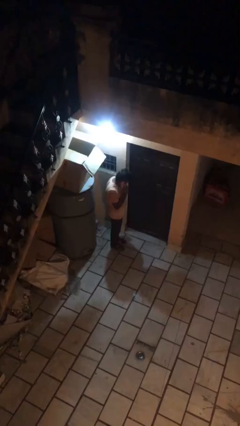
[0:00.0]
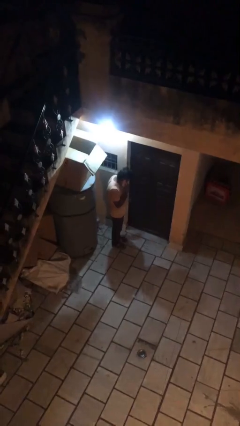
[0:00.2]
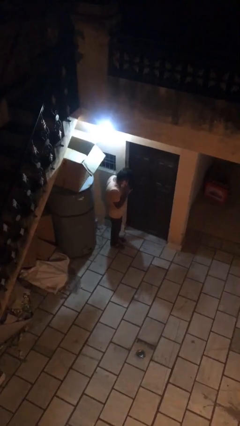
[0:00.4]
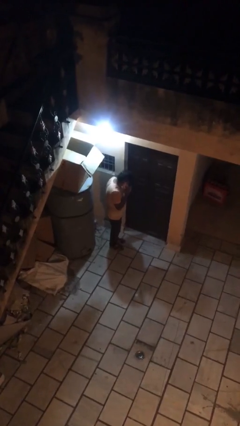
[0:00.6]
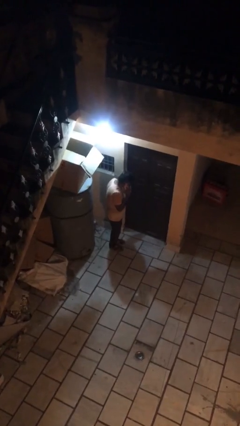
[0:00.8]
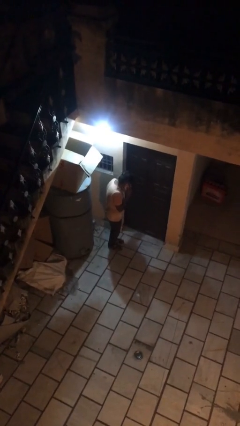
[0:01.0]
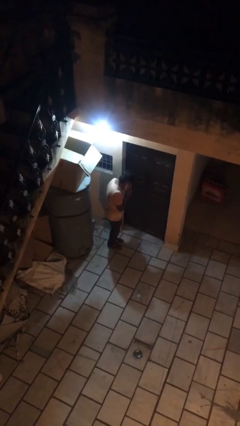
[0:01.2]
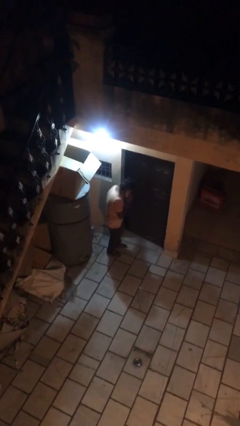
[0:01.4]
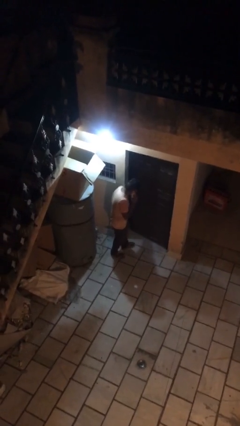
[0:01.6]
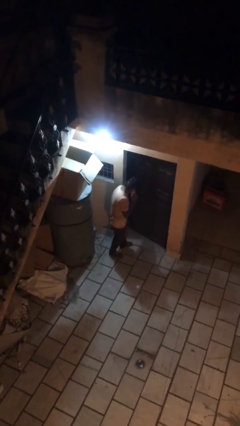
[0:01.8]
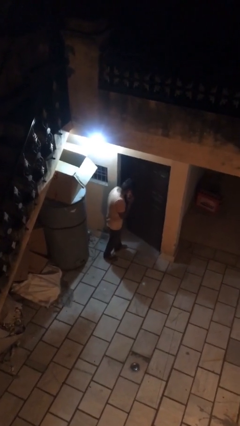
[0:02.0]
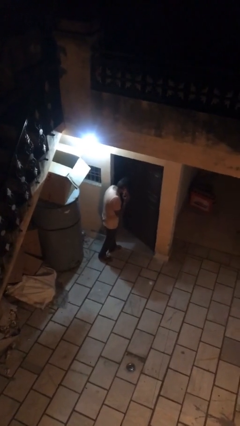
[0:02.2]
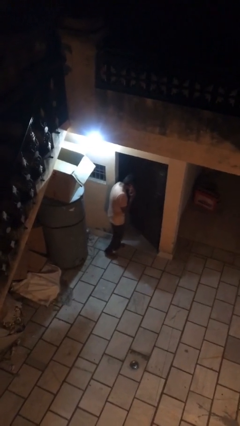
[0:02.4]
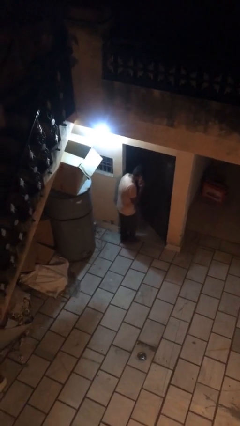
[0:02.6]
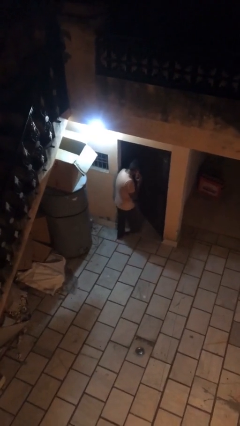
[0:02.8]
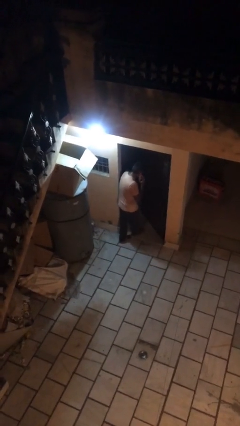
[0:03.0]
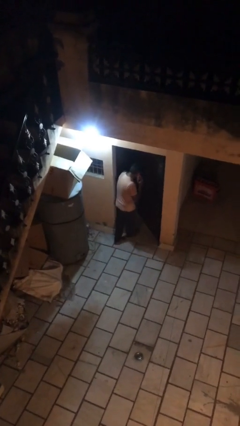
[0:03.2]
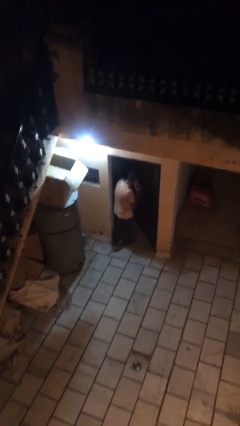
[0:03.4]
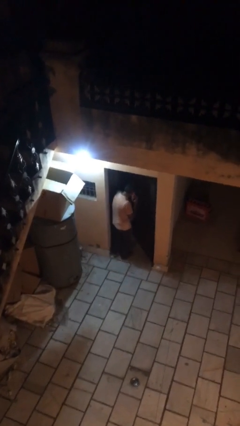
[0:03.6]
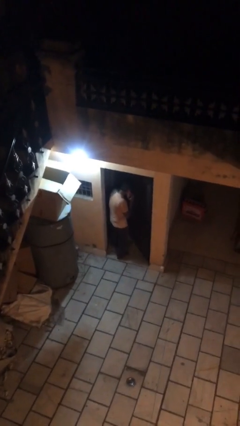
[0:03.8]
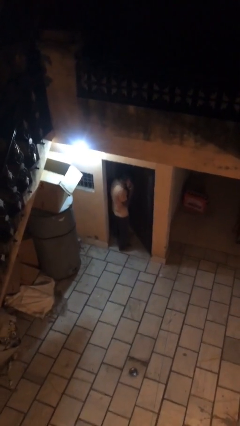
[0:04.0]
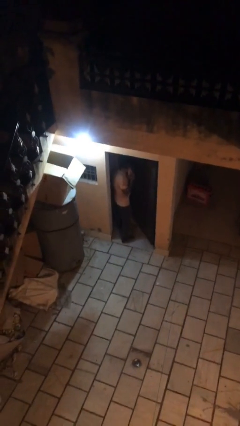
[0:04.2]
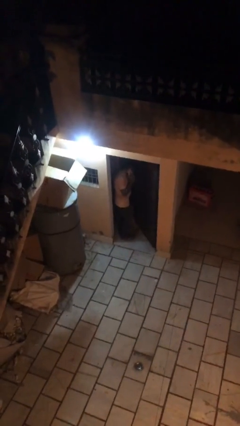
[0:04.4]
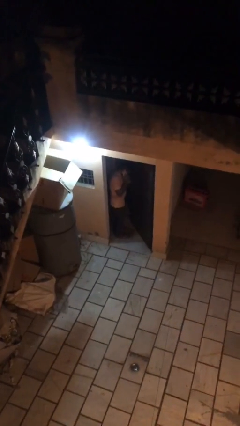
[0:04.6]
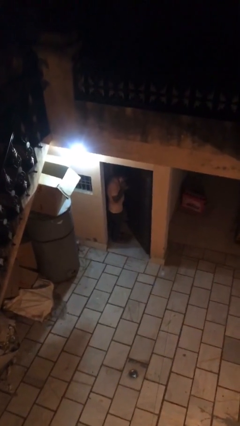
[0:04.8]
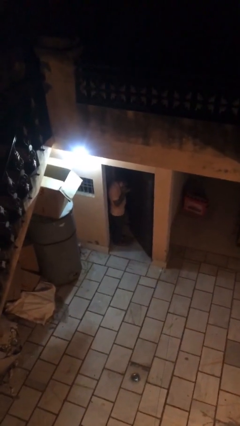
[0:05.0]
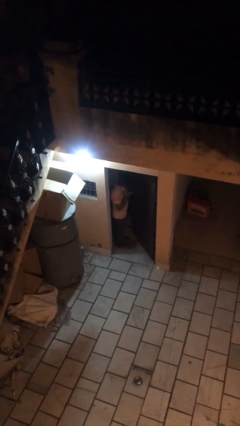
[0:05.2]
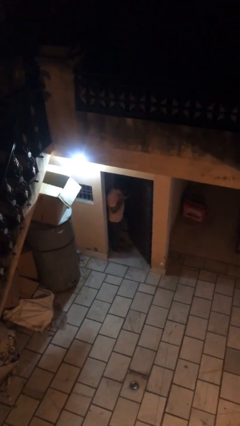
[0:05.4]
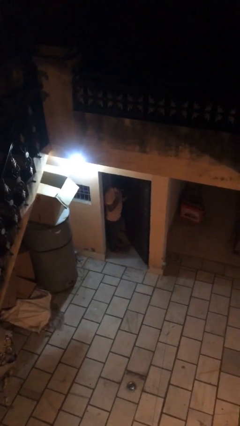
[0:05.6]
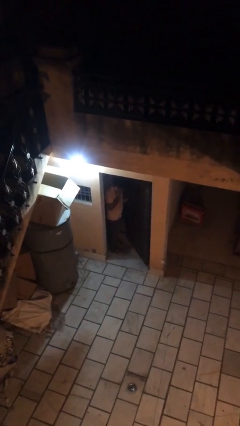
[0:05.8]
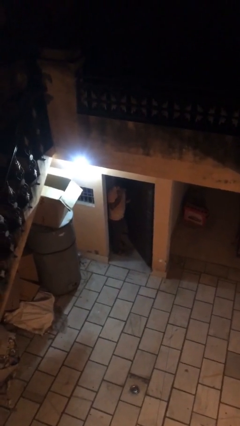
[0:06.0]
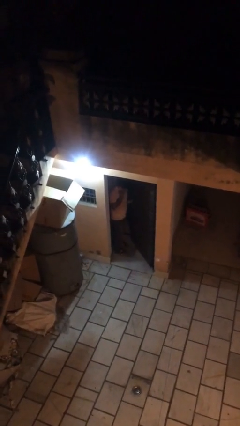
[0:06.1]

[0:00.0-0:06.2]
person opens facility door

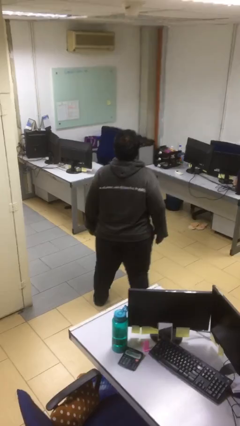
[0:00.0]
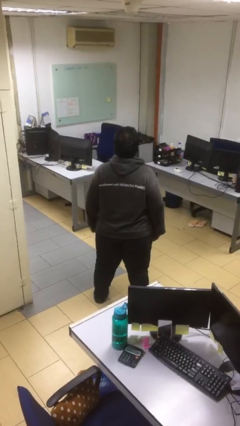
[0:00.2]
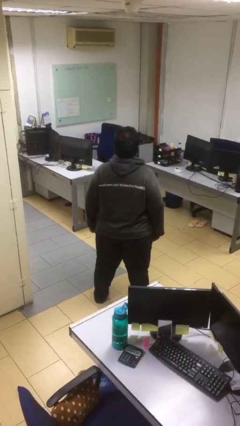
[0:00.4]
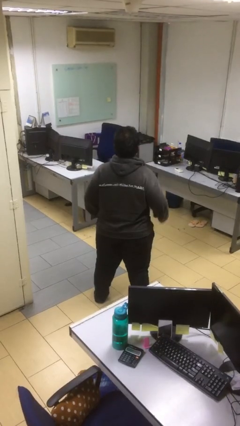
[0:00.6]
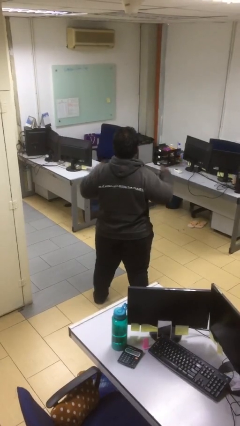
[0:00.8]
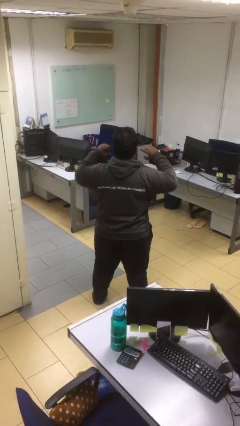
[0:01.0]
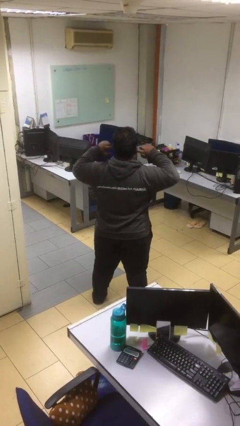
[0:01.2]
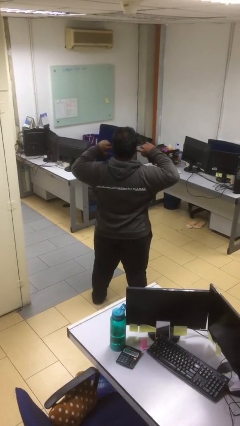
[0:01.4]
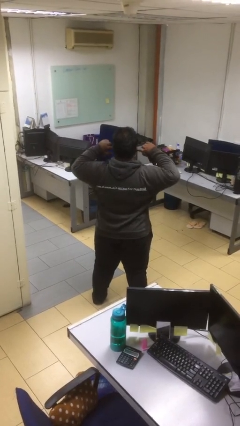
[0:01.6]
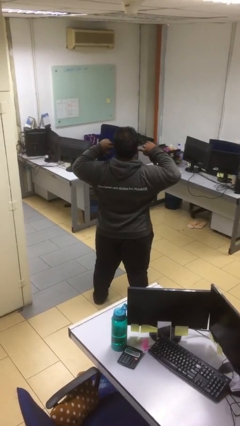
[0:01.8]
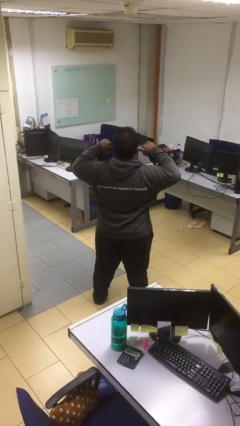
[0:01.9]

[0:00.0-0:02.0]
person puts fingers in ear

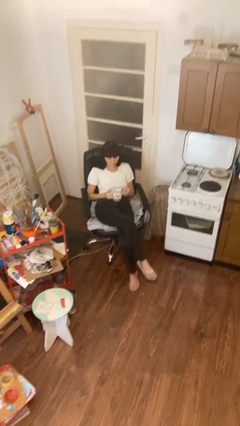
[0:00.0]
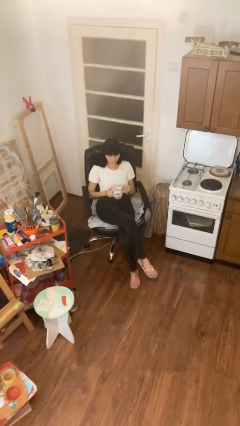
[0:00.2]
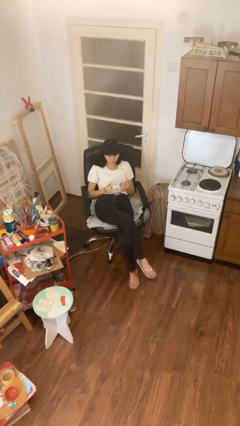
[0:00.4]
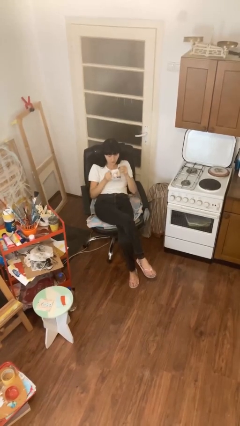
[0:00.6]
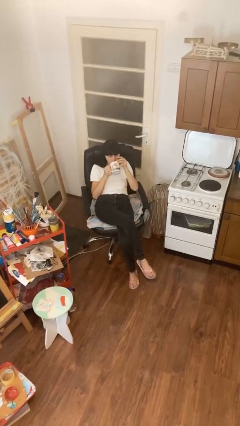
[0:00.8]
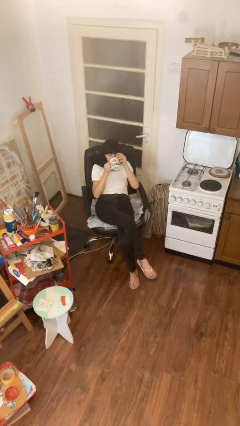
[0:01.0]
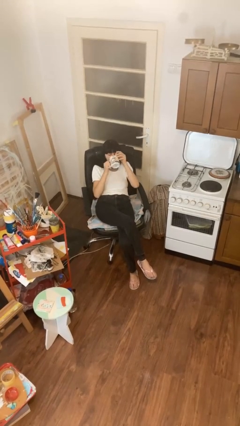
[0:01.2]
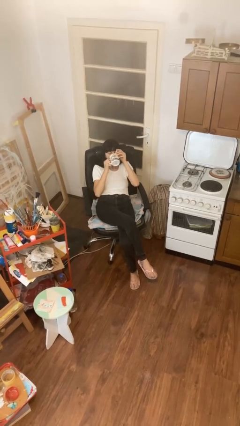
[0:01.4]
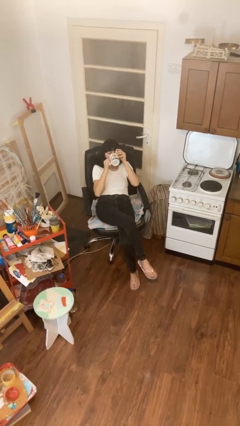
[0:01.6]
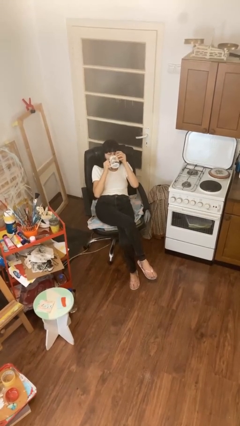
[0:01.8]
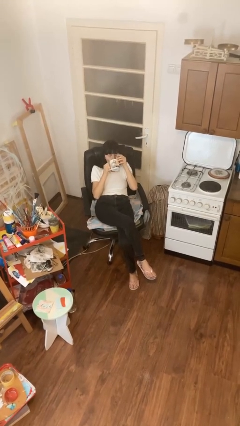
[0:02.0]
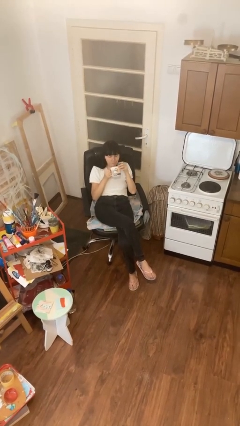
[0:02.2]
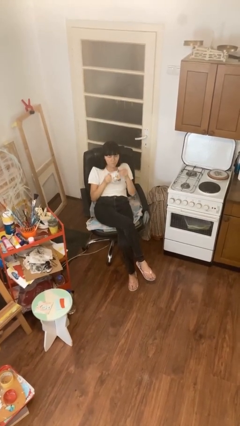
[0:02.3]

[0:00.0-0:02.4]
person drinks from mug

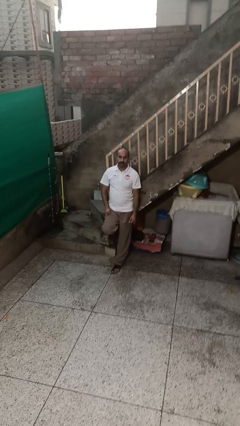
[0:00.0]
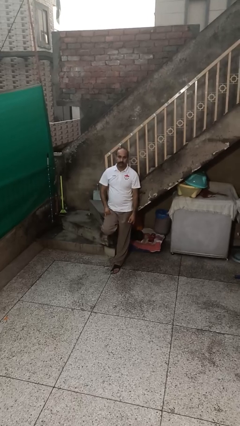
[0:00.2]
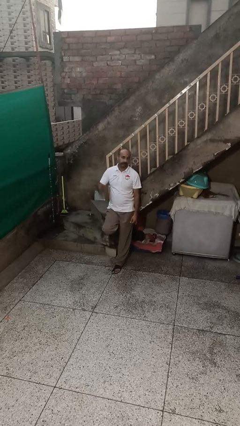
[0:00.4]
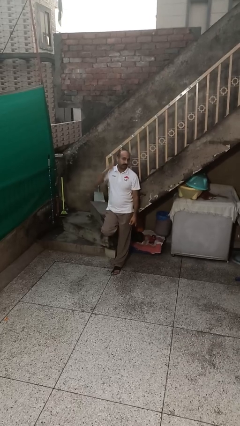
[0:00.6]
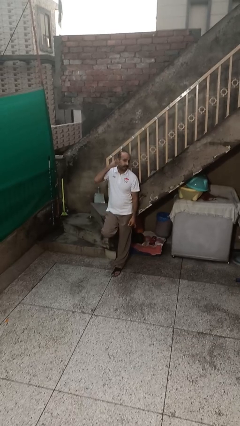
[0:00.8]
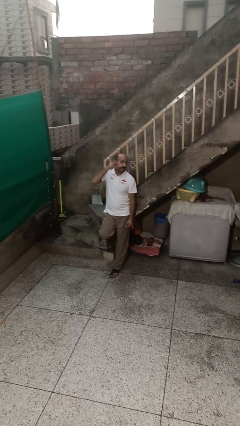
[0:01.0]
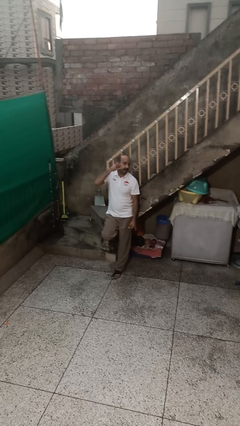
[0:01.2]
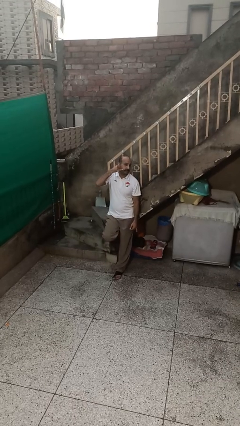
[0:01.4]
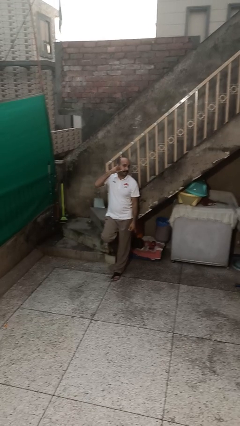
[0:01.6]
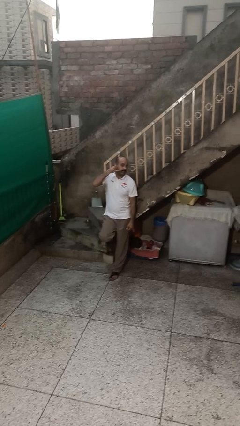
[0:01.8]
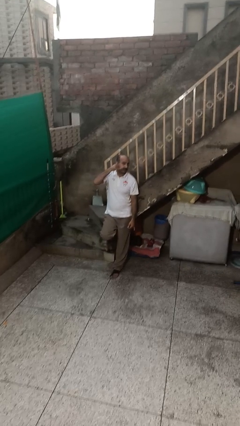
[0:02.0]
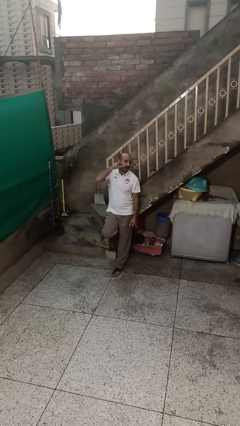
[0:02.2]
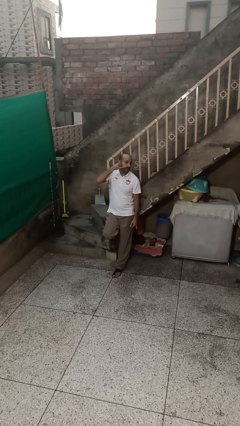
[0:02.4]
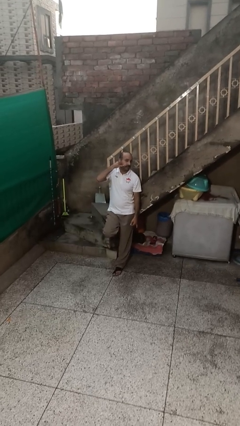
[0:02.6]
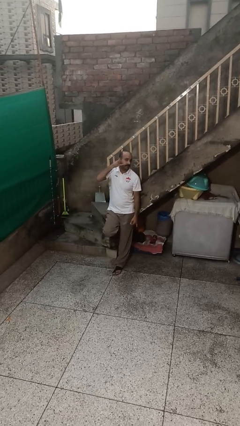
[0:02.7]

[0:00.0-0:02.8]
person gestures call me

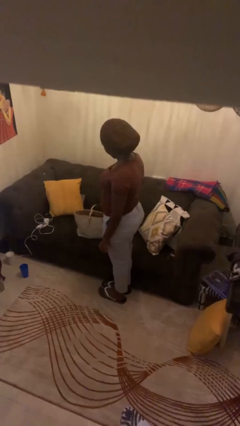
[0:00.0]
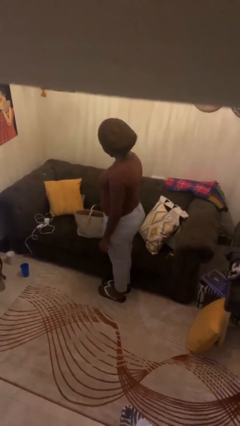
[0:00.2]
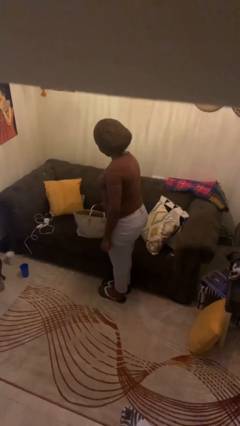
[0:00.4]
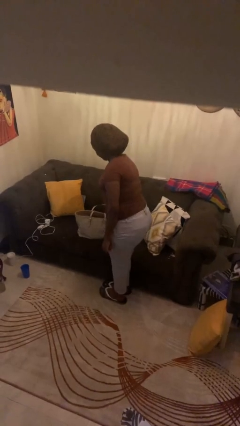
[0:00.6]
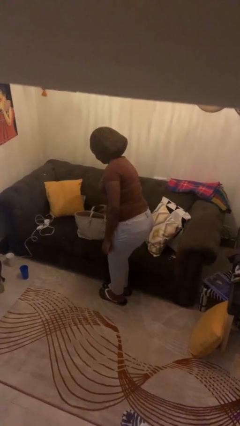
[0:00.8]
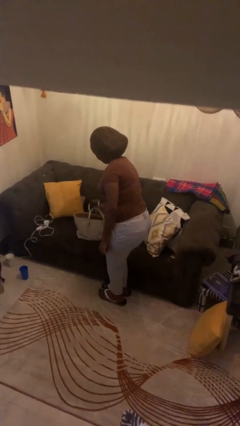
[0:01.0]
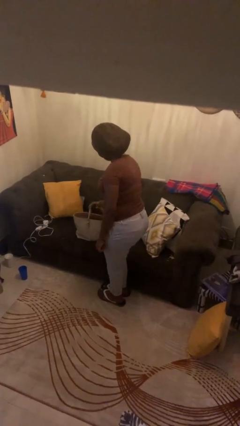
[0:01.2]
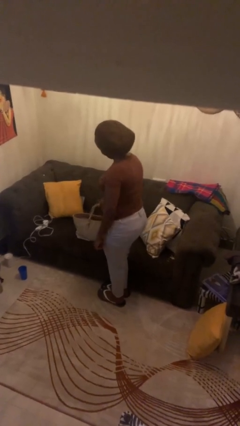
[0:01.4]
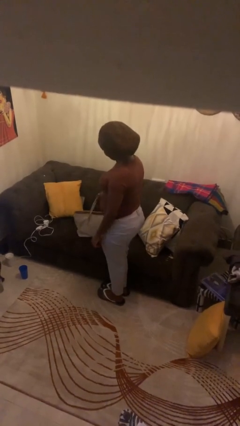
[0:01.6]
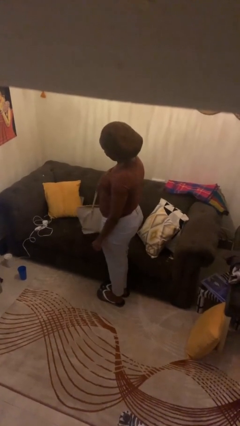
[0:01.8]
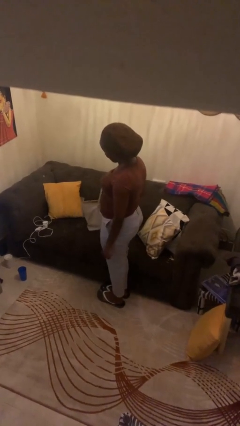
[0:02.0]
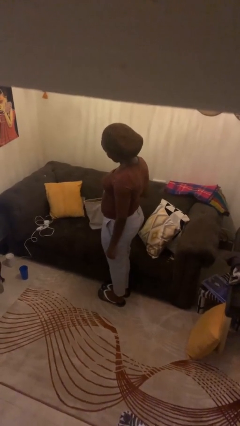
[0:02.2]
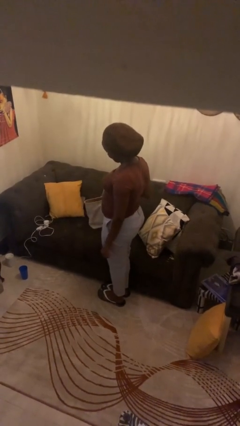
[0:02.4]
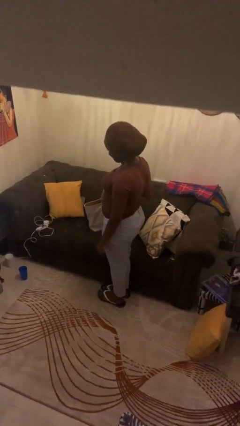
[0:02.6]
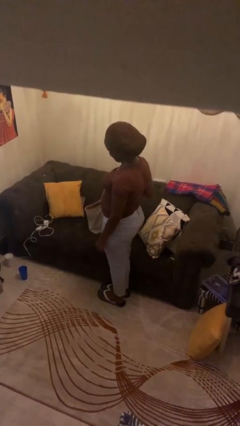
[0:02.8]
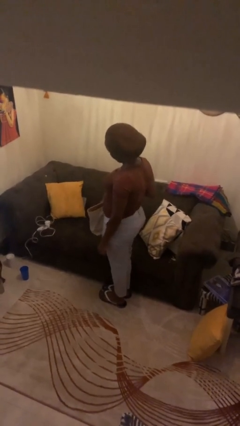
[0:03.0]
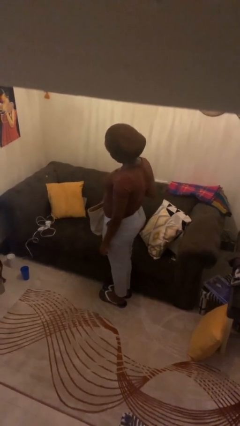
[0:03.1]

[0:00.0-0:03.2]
person picks up object from couch

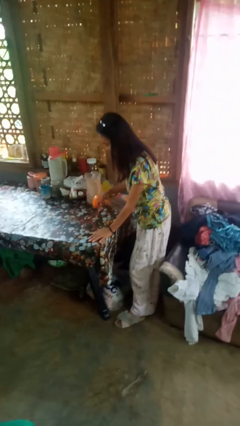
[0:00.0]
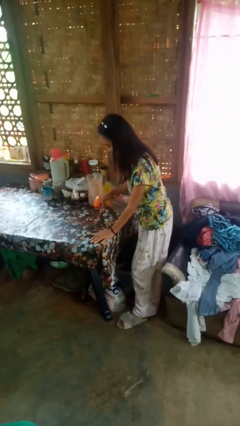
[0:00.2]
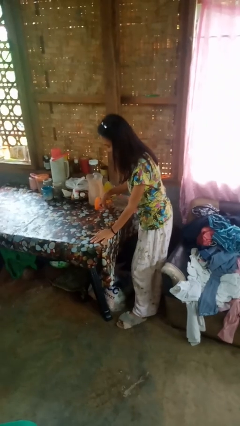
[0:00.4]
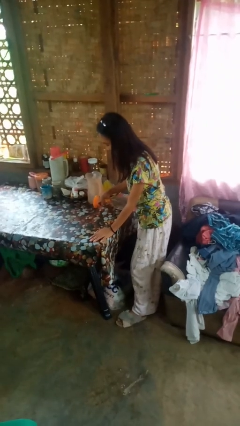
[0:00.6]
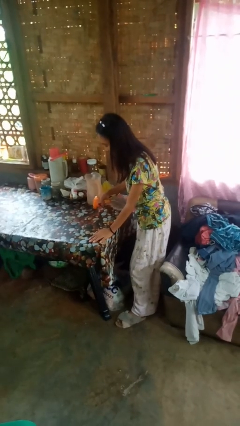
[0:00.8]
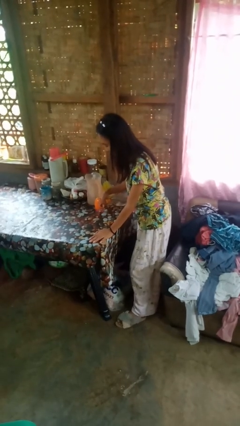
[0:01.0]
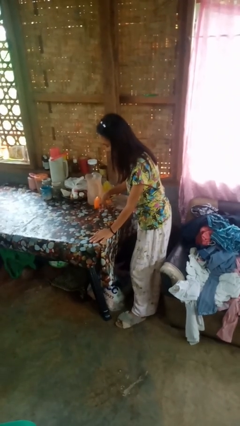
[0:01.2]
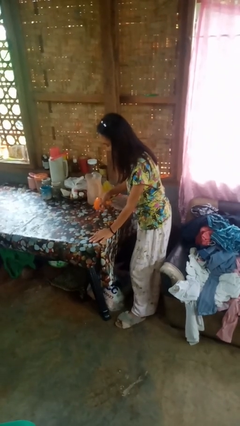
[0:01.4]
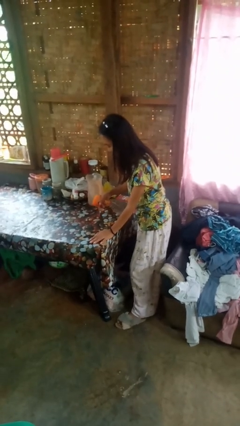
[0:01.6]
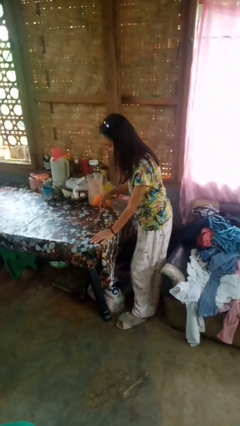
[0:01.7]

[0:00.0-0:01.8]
person sprays from bottle
